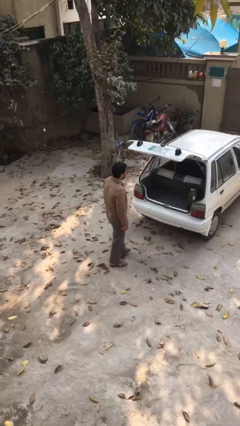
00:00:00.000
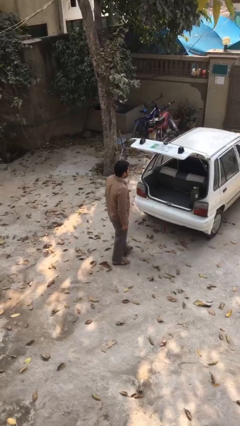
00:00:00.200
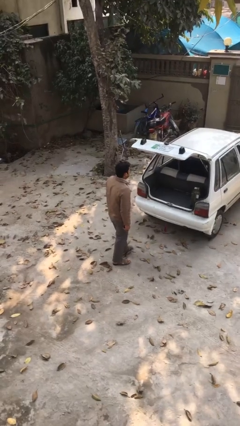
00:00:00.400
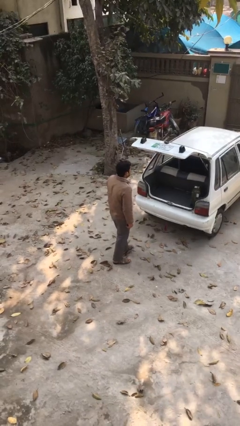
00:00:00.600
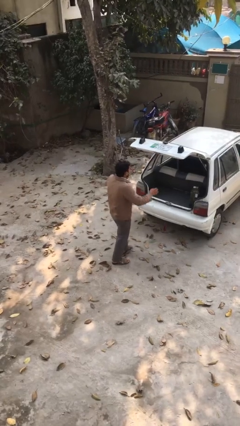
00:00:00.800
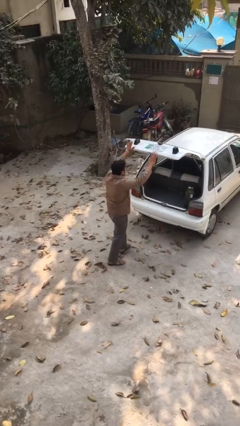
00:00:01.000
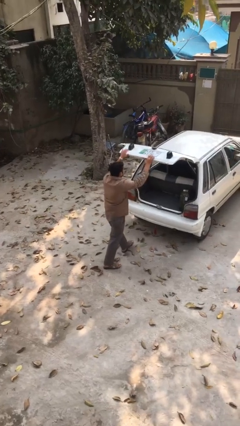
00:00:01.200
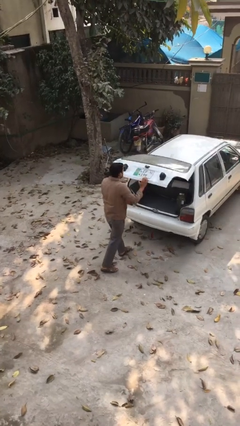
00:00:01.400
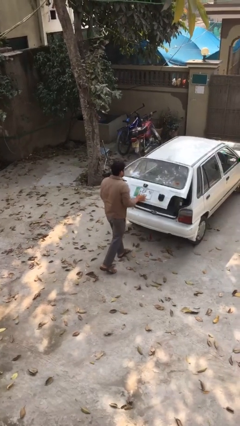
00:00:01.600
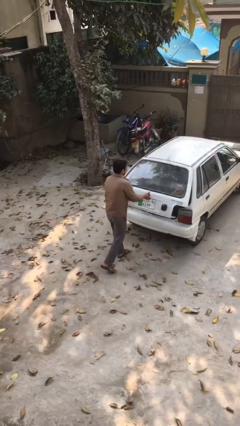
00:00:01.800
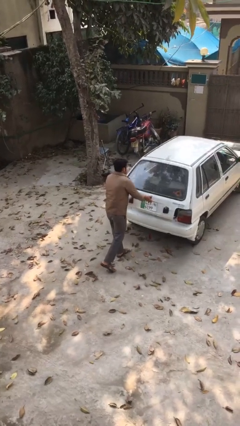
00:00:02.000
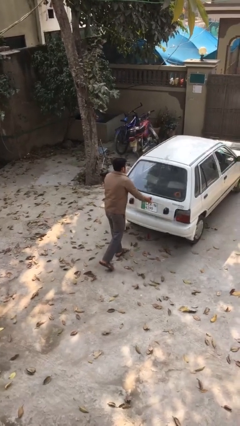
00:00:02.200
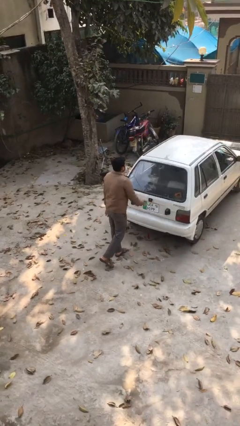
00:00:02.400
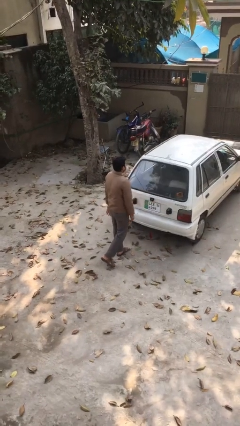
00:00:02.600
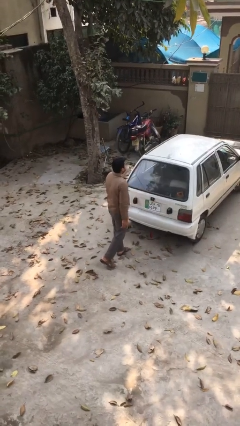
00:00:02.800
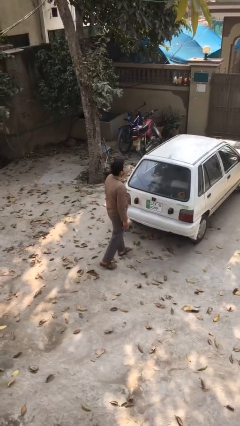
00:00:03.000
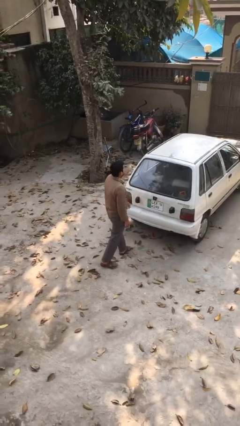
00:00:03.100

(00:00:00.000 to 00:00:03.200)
person closes car trunk

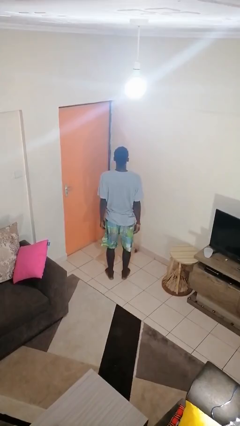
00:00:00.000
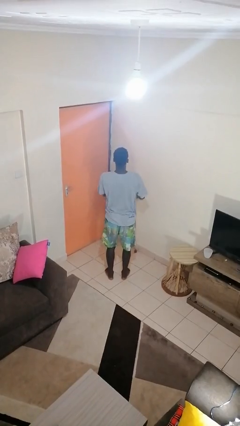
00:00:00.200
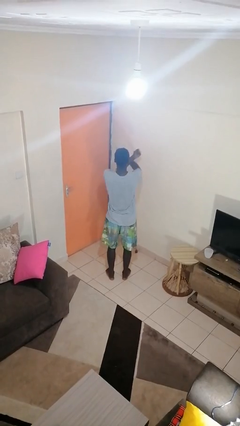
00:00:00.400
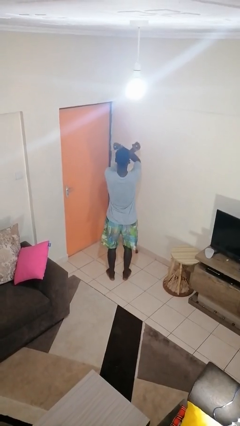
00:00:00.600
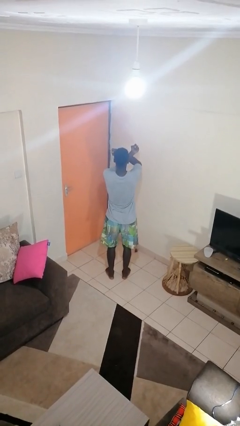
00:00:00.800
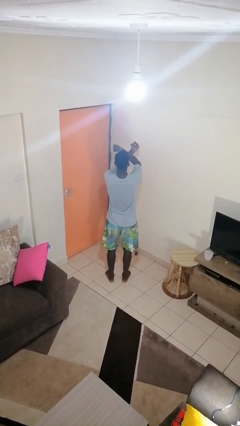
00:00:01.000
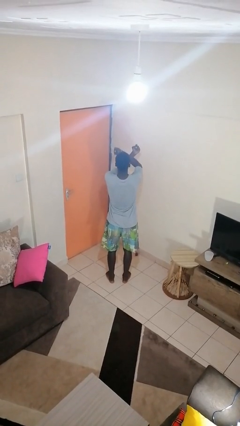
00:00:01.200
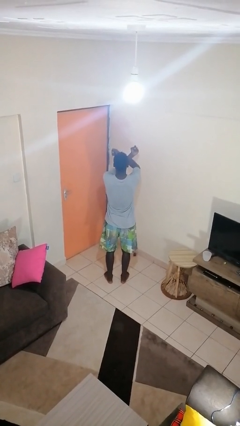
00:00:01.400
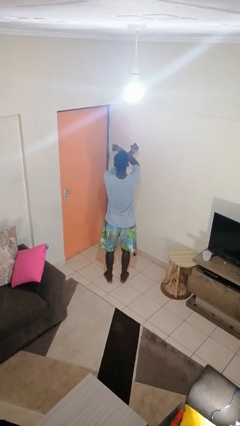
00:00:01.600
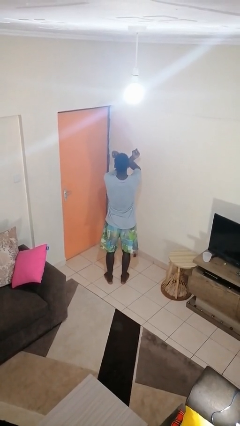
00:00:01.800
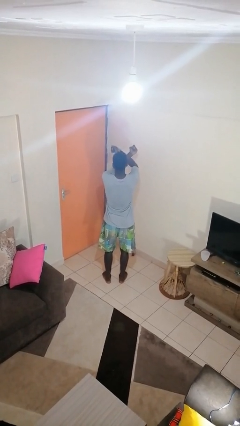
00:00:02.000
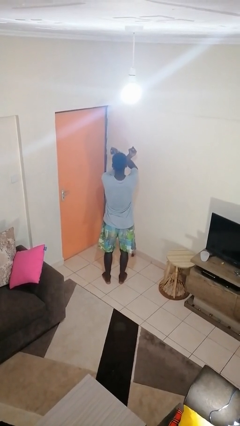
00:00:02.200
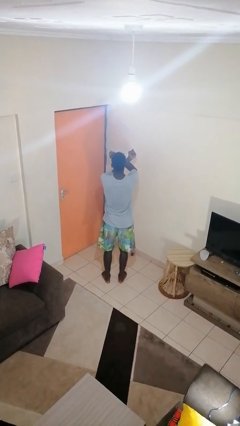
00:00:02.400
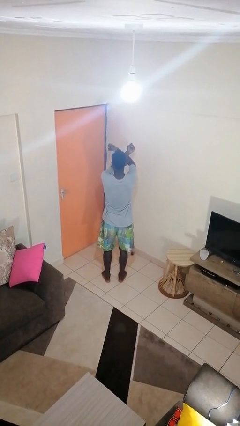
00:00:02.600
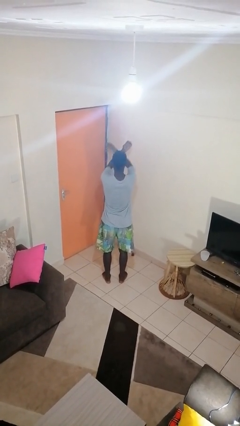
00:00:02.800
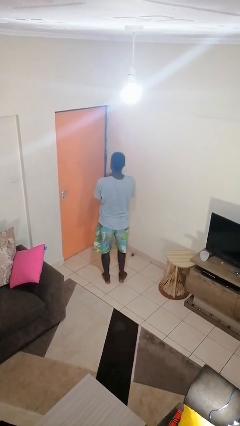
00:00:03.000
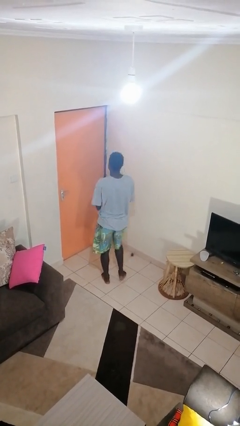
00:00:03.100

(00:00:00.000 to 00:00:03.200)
person gestures arms x

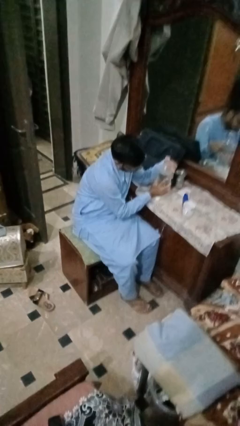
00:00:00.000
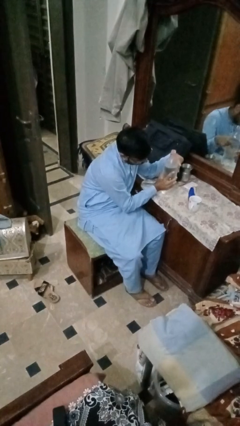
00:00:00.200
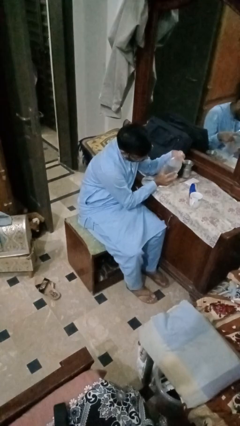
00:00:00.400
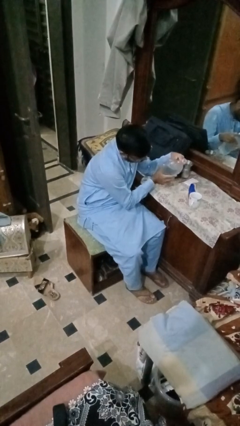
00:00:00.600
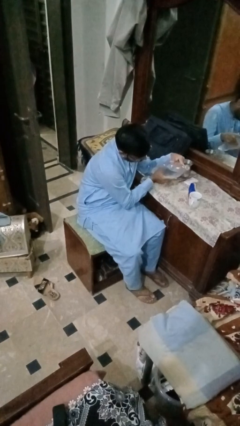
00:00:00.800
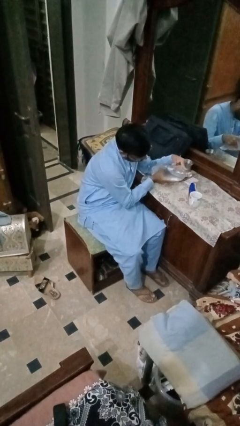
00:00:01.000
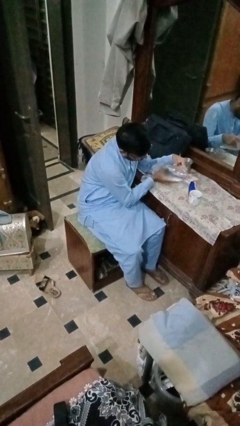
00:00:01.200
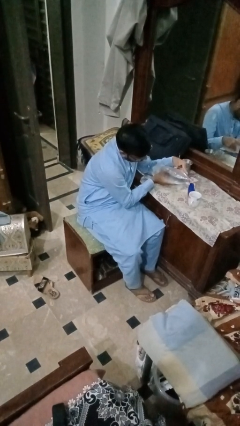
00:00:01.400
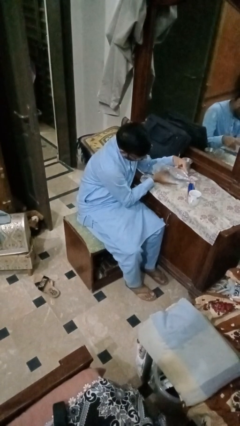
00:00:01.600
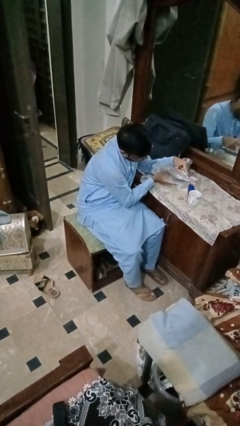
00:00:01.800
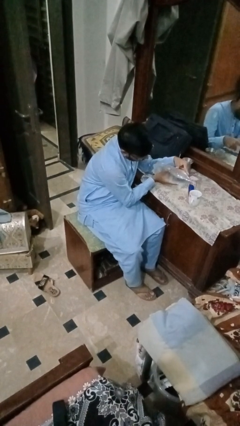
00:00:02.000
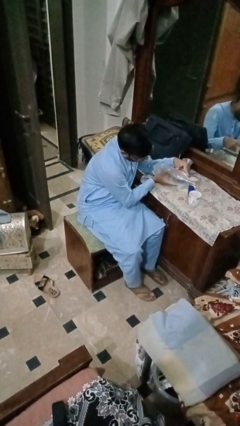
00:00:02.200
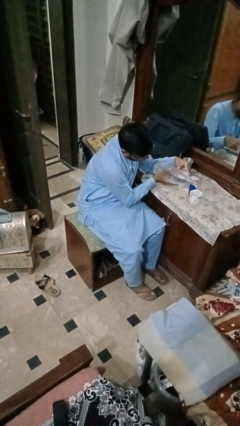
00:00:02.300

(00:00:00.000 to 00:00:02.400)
person pours liquid into cup

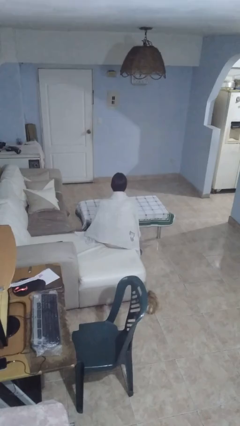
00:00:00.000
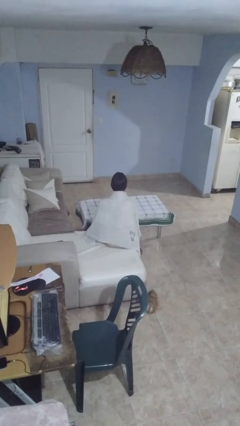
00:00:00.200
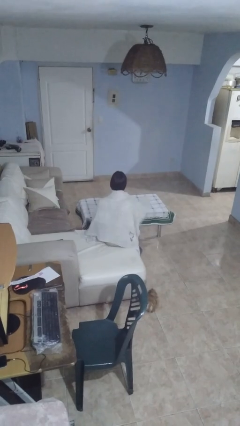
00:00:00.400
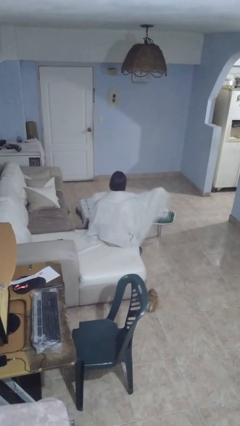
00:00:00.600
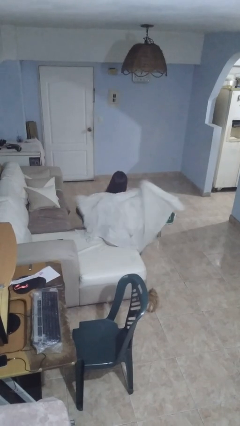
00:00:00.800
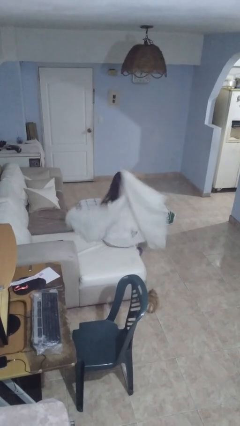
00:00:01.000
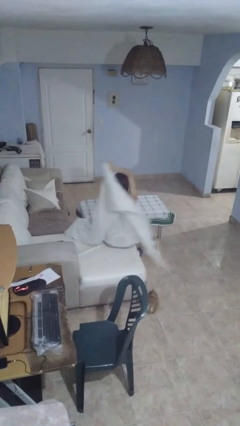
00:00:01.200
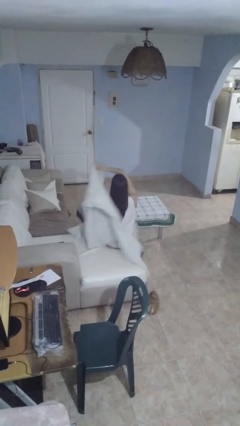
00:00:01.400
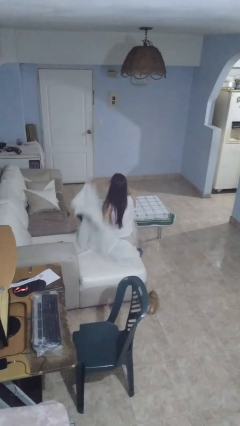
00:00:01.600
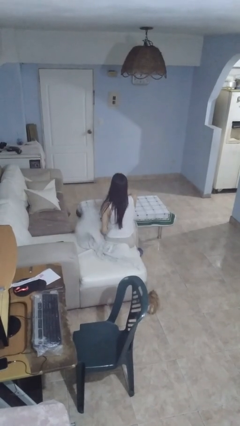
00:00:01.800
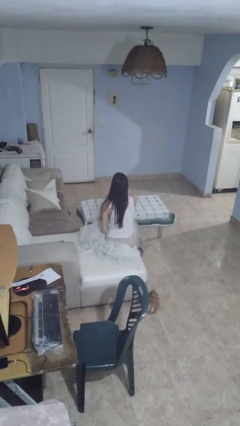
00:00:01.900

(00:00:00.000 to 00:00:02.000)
person uncovers with blanket

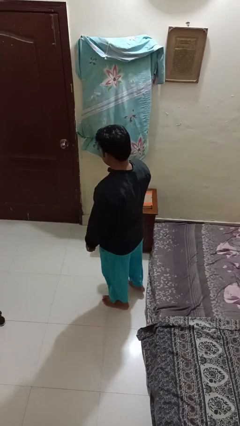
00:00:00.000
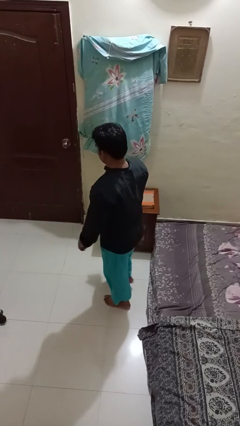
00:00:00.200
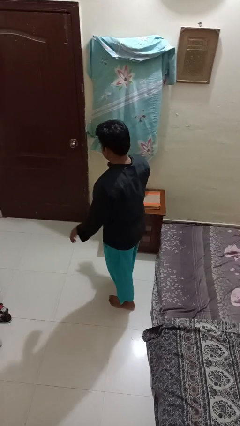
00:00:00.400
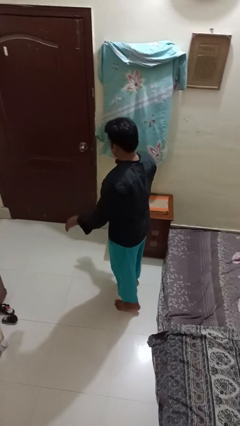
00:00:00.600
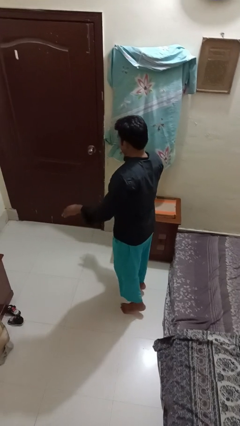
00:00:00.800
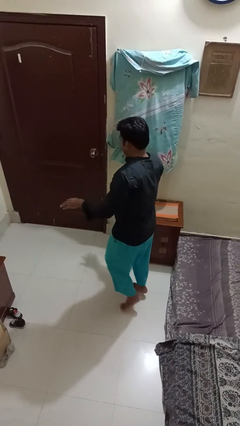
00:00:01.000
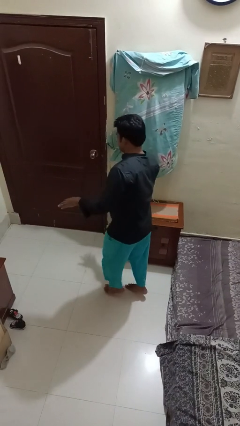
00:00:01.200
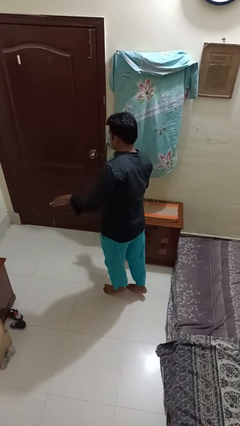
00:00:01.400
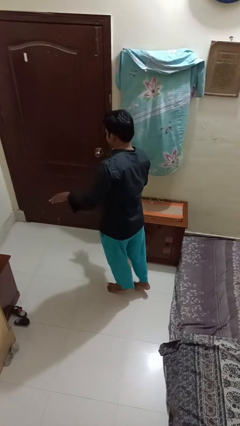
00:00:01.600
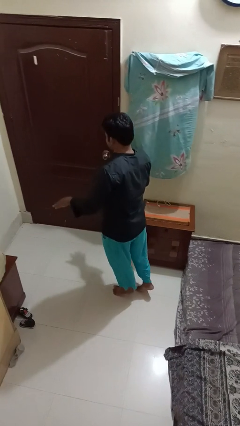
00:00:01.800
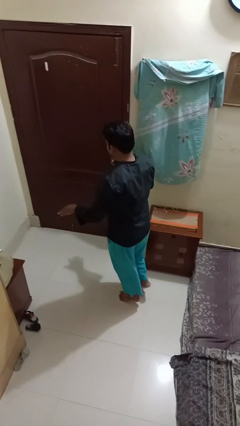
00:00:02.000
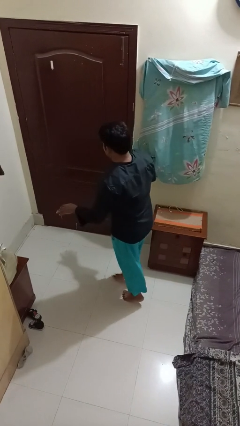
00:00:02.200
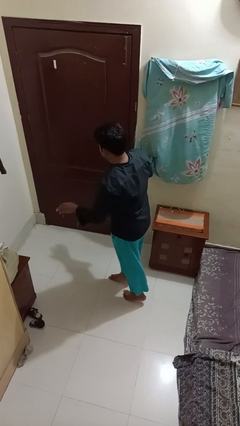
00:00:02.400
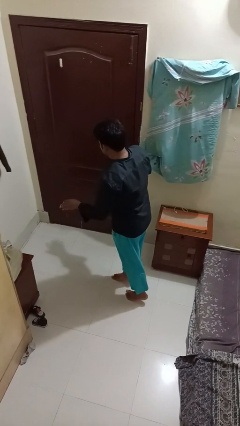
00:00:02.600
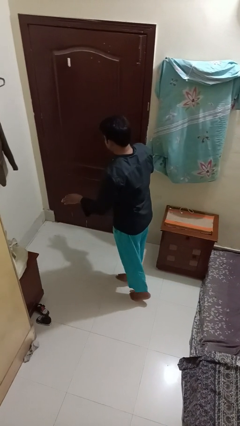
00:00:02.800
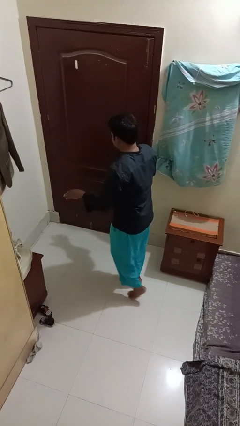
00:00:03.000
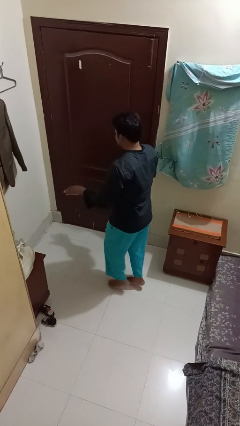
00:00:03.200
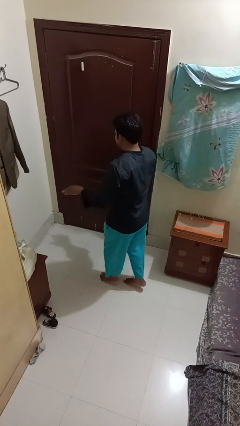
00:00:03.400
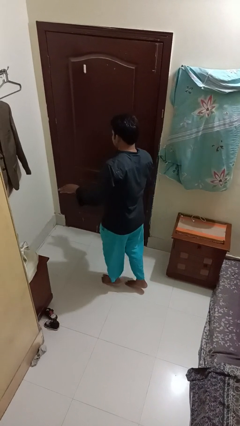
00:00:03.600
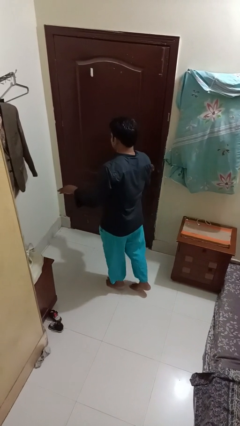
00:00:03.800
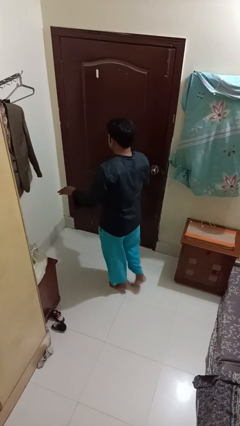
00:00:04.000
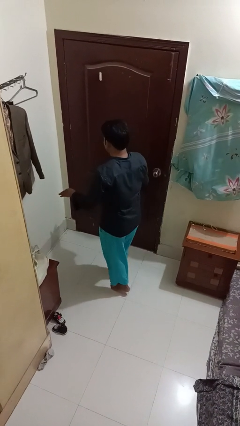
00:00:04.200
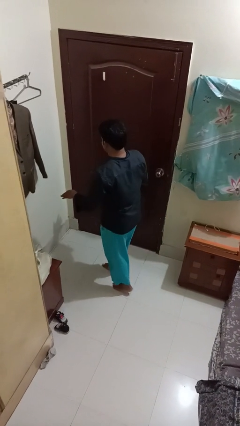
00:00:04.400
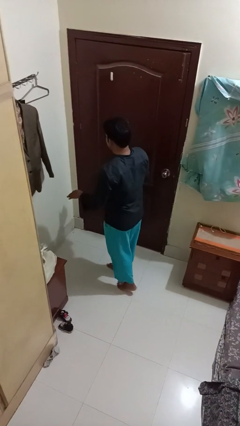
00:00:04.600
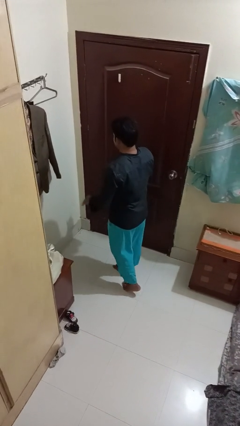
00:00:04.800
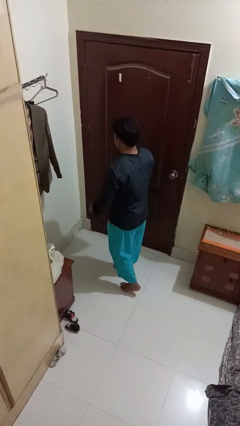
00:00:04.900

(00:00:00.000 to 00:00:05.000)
person walks tiptoe

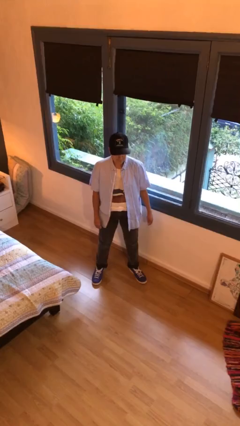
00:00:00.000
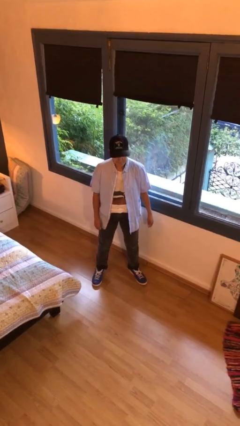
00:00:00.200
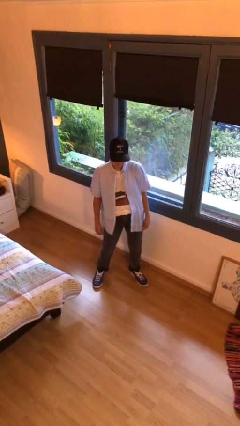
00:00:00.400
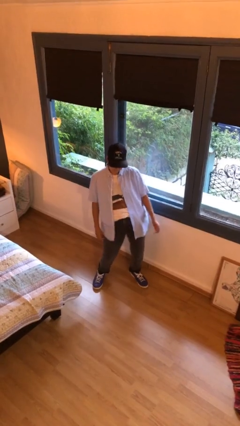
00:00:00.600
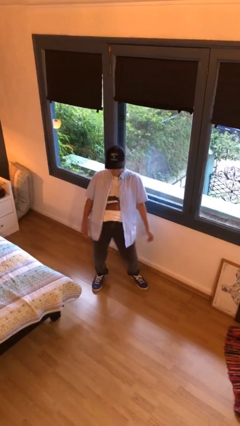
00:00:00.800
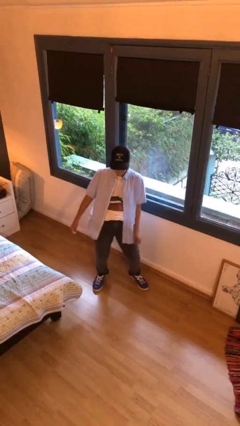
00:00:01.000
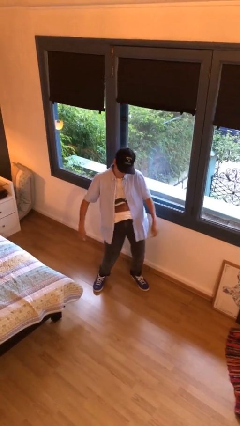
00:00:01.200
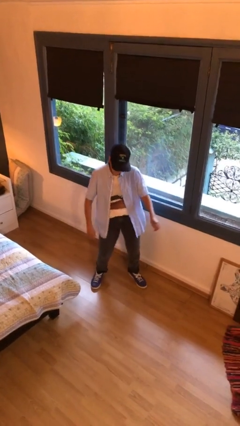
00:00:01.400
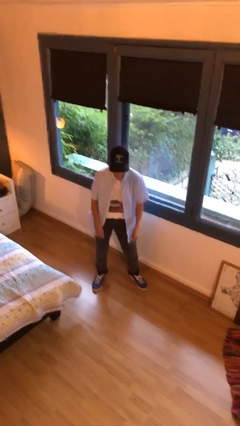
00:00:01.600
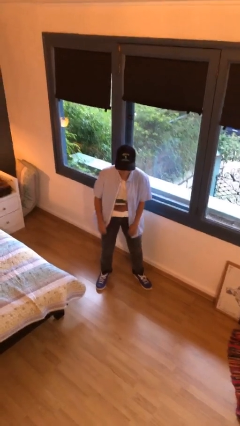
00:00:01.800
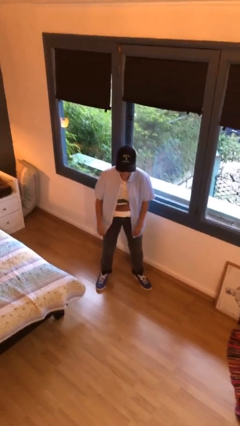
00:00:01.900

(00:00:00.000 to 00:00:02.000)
person wiggles hips
